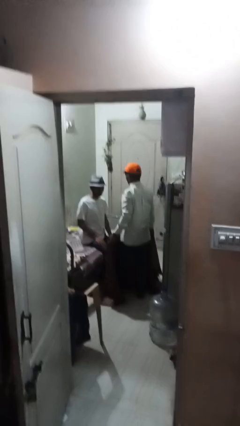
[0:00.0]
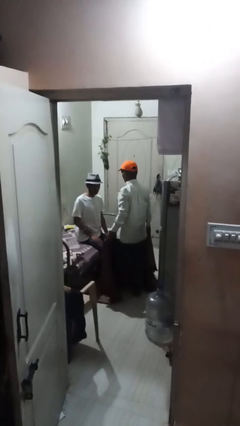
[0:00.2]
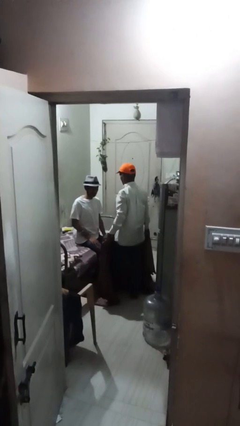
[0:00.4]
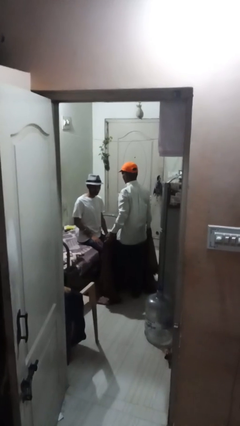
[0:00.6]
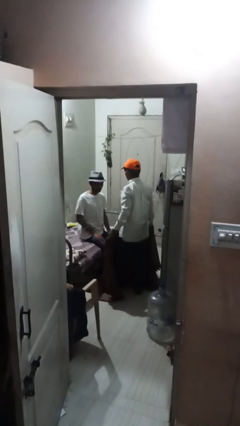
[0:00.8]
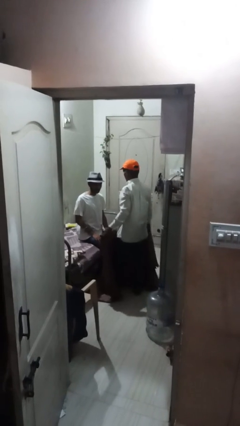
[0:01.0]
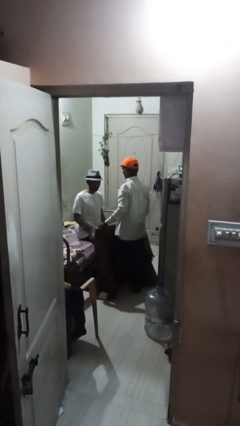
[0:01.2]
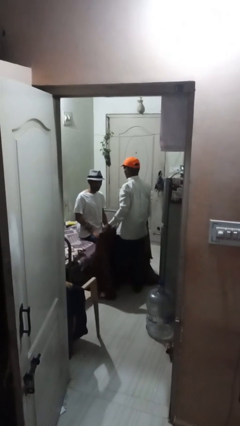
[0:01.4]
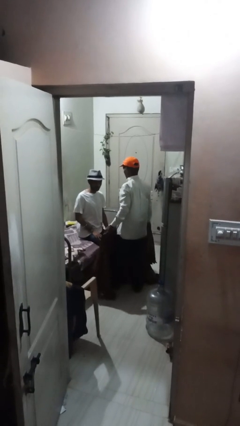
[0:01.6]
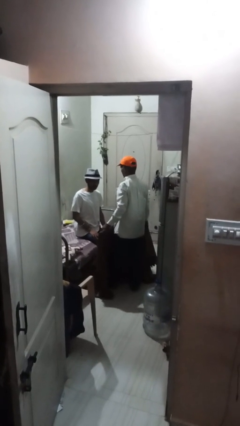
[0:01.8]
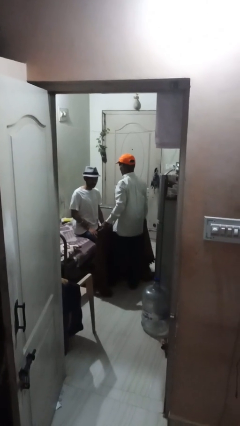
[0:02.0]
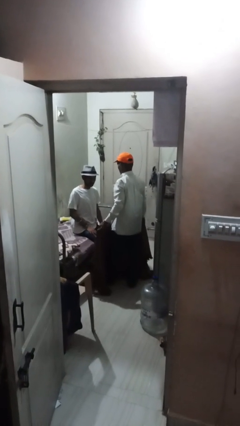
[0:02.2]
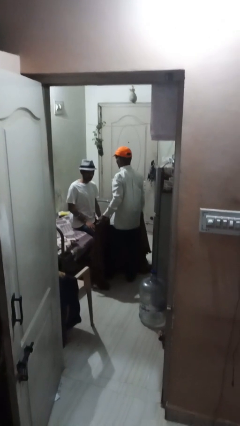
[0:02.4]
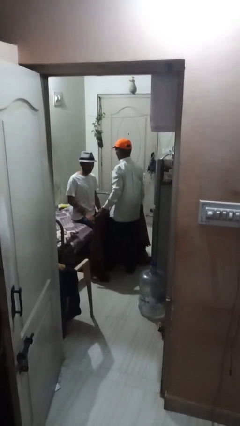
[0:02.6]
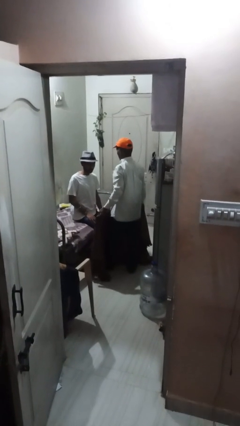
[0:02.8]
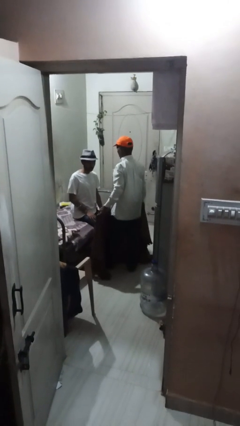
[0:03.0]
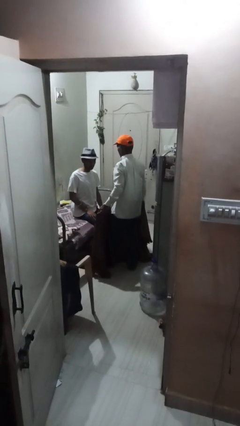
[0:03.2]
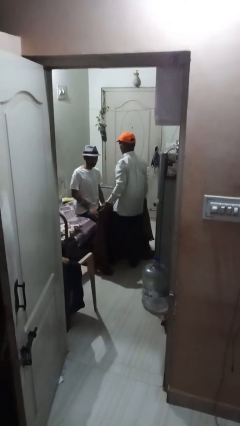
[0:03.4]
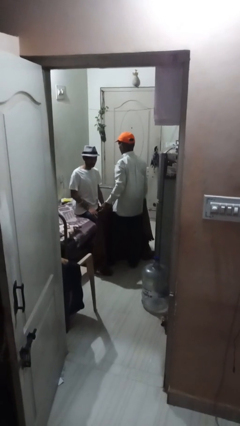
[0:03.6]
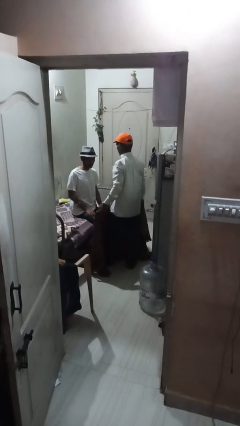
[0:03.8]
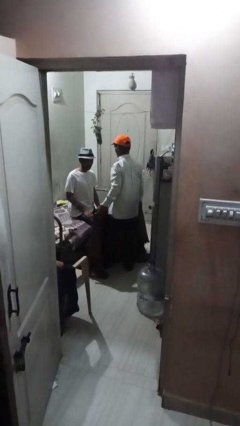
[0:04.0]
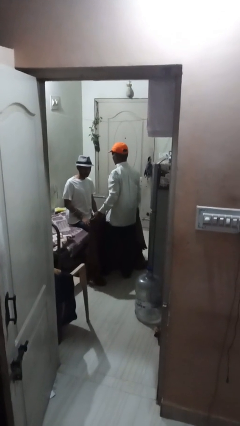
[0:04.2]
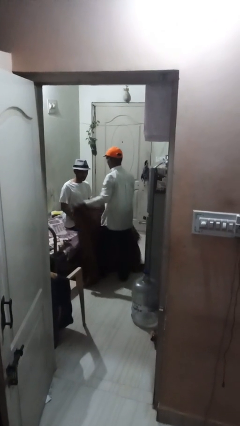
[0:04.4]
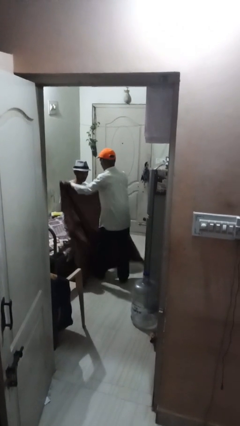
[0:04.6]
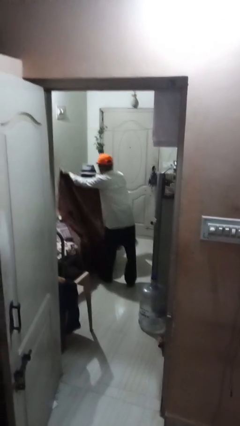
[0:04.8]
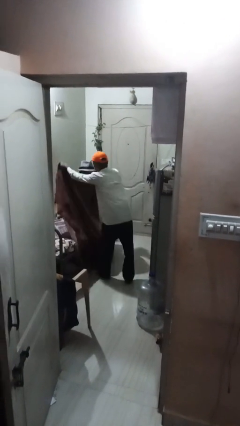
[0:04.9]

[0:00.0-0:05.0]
person uncovers friend with blanket

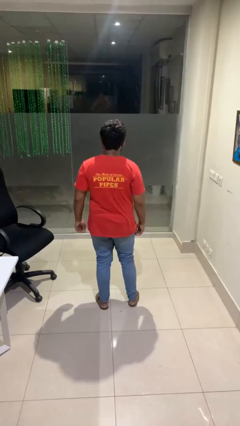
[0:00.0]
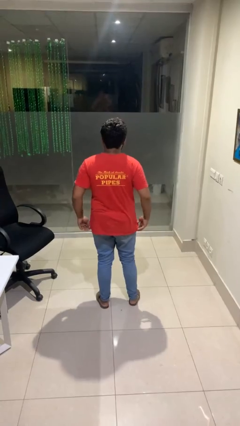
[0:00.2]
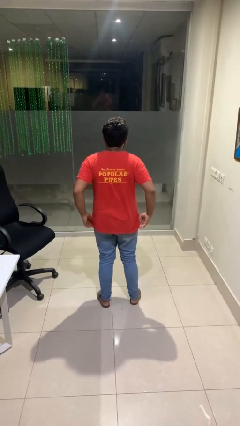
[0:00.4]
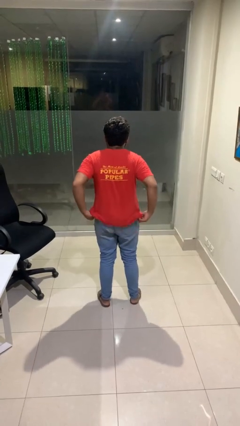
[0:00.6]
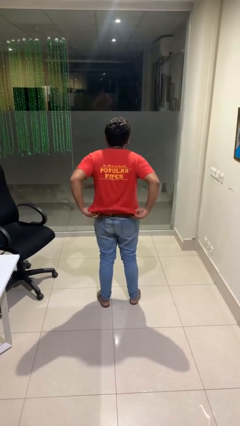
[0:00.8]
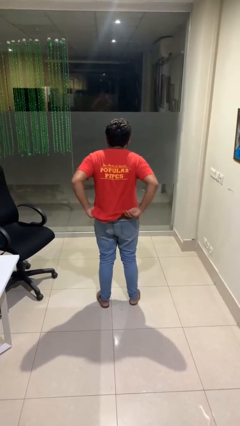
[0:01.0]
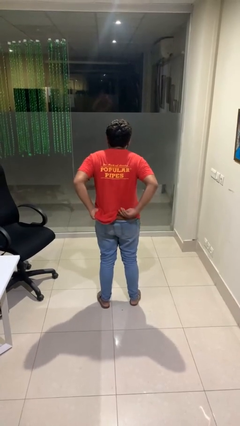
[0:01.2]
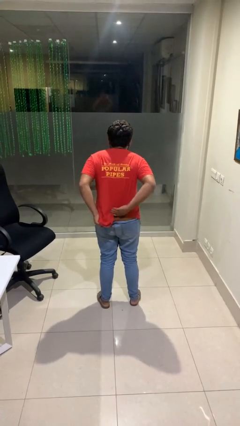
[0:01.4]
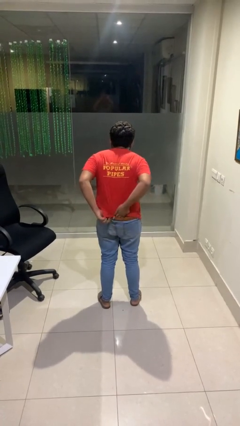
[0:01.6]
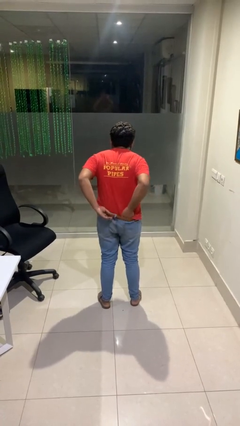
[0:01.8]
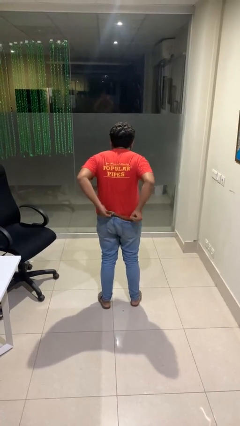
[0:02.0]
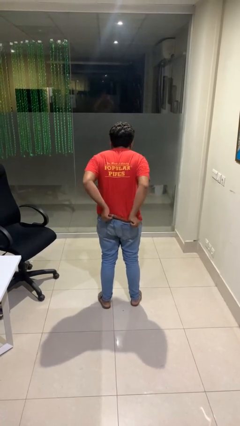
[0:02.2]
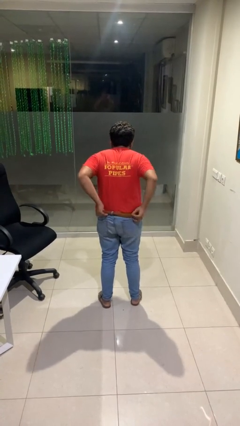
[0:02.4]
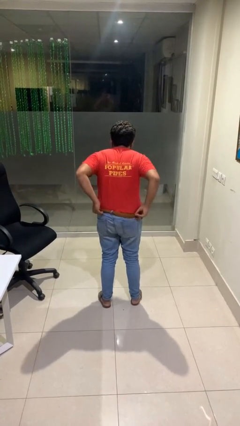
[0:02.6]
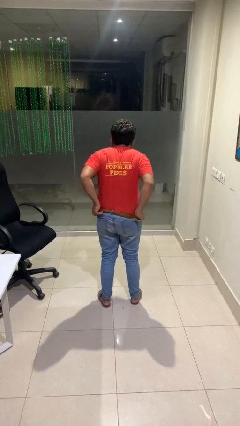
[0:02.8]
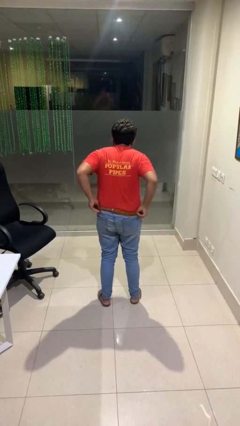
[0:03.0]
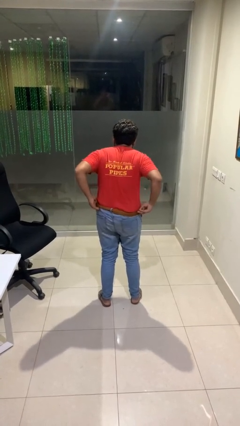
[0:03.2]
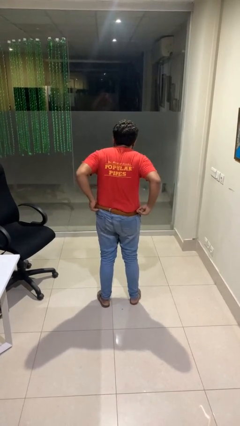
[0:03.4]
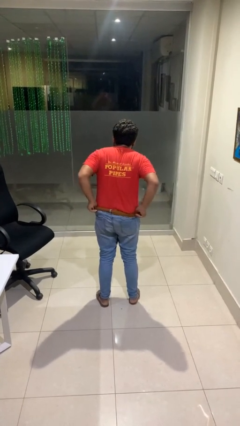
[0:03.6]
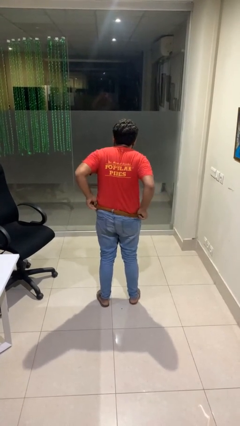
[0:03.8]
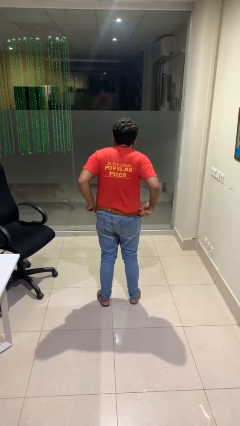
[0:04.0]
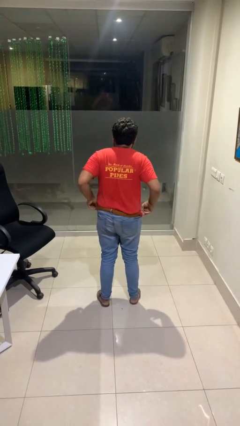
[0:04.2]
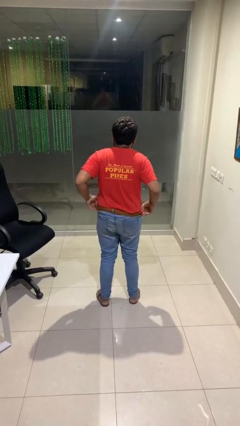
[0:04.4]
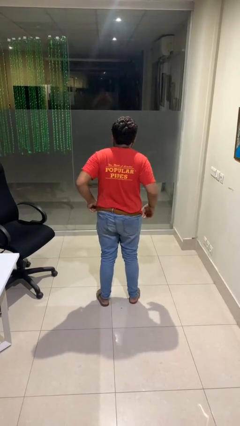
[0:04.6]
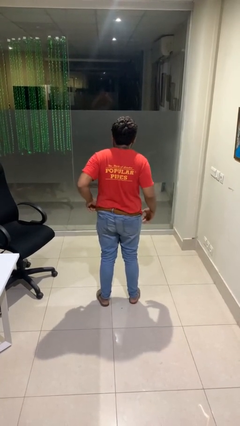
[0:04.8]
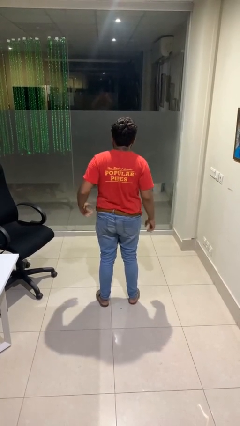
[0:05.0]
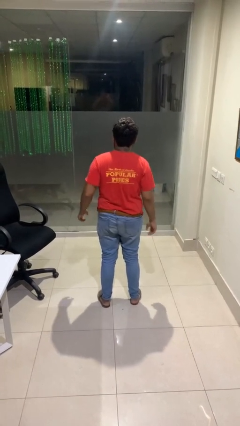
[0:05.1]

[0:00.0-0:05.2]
person tucks in shirt

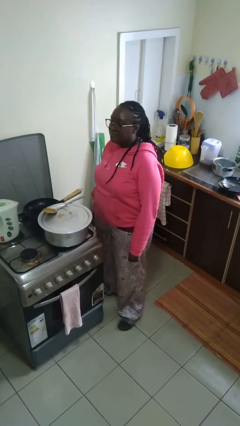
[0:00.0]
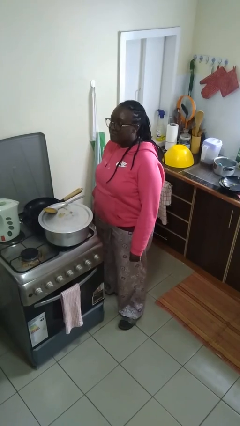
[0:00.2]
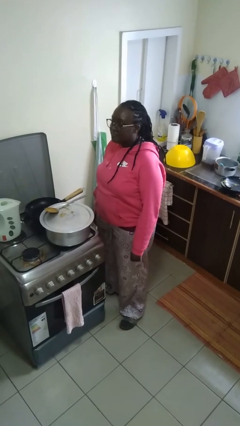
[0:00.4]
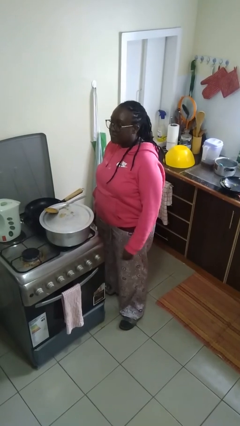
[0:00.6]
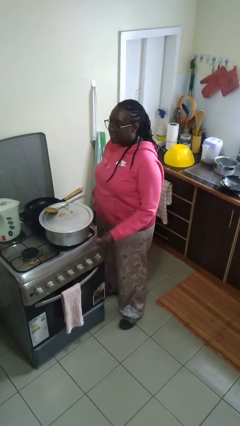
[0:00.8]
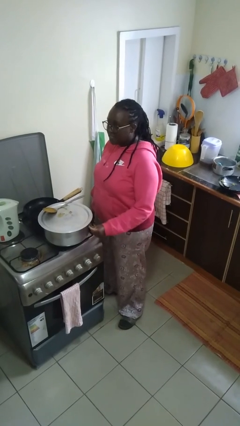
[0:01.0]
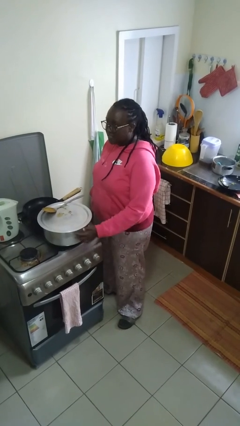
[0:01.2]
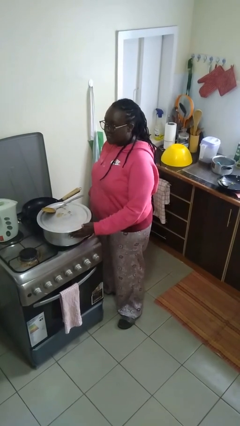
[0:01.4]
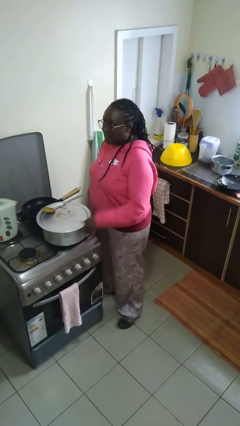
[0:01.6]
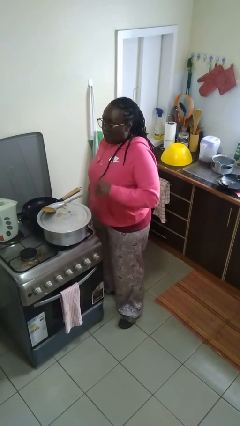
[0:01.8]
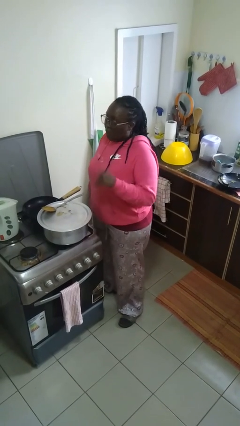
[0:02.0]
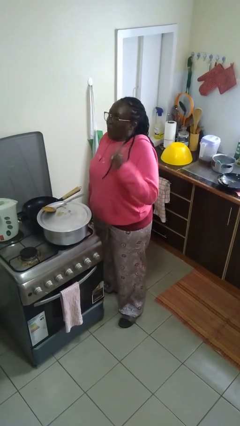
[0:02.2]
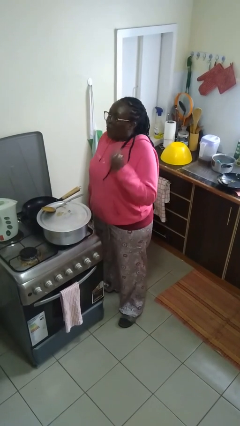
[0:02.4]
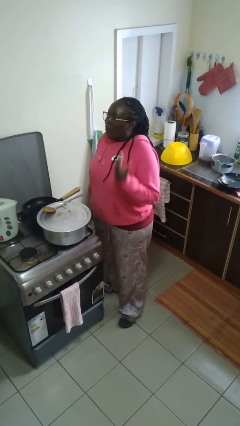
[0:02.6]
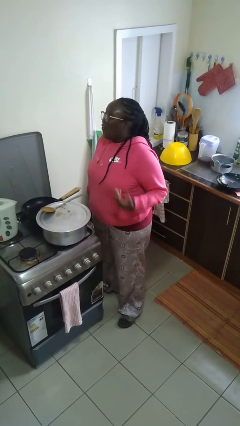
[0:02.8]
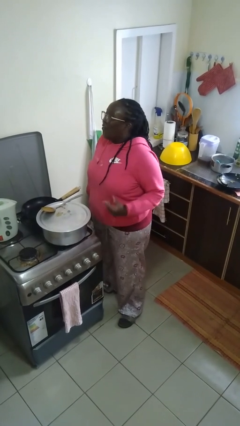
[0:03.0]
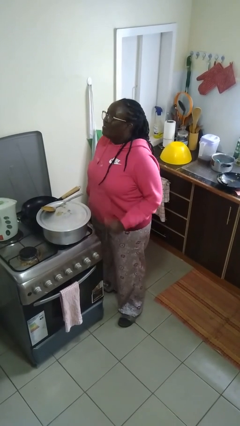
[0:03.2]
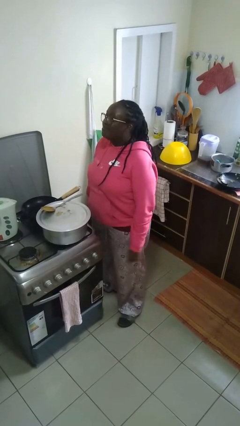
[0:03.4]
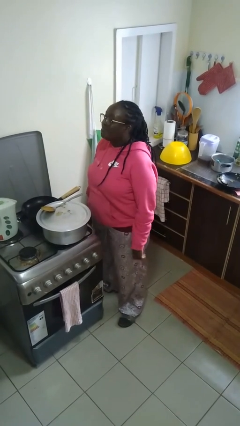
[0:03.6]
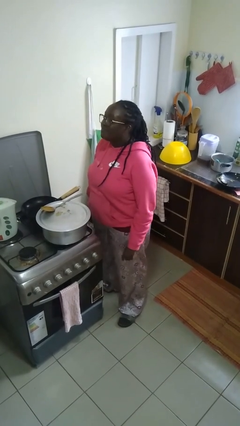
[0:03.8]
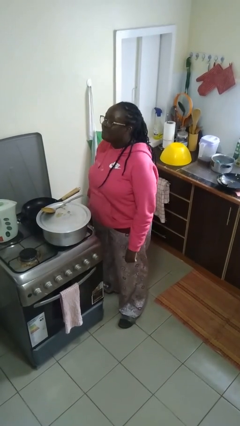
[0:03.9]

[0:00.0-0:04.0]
person burns hand

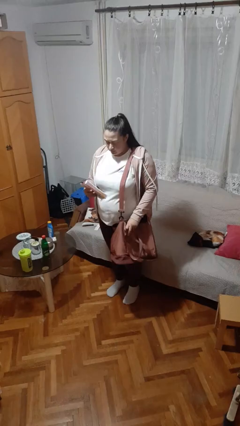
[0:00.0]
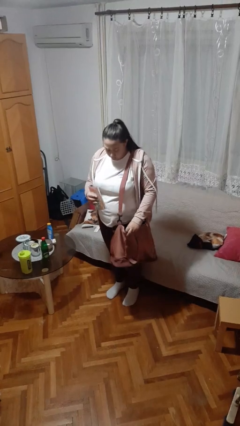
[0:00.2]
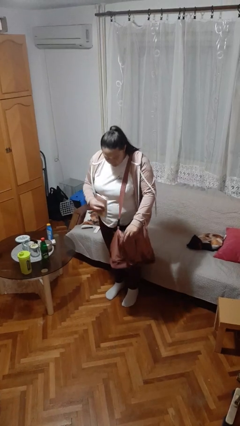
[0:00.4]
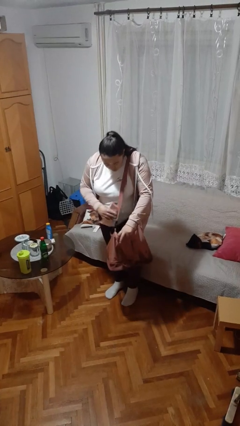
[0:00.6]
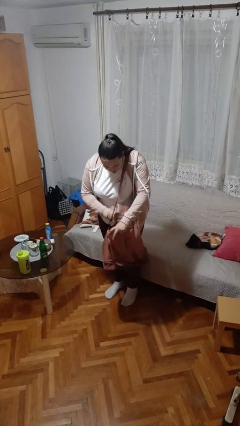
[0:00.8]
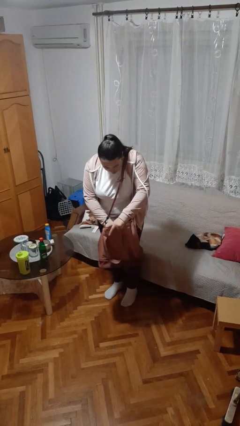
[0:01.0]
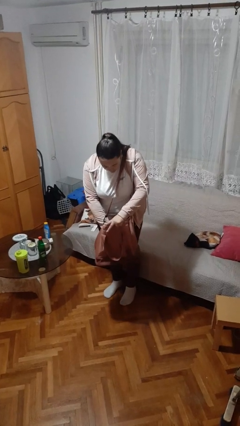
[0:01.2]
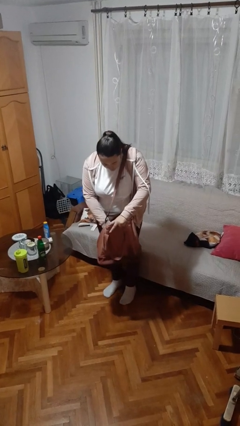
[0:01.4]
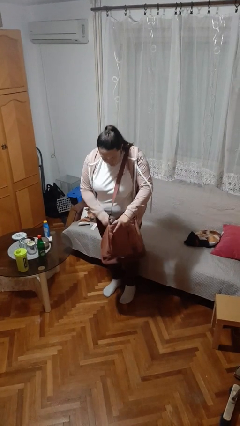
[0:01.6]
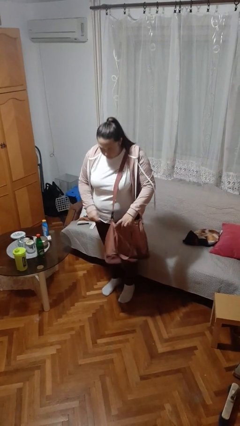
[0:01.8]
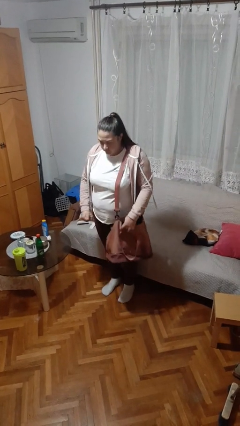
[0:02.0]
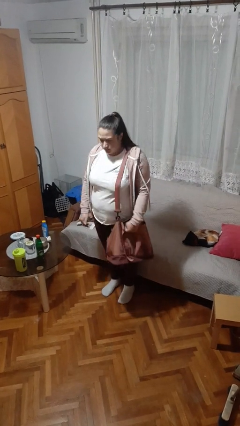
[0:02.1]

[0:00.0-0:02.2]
person puts object into purse

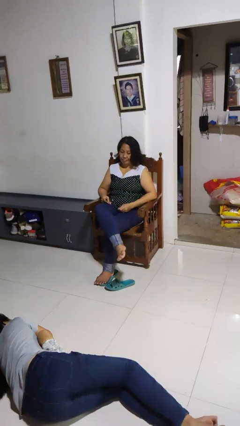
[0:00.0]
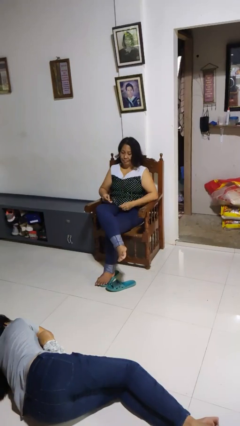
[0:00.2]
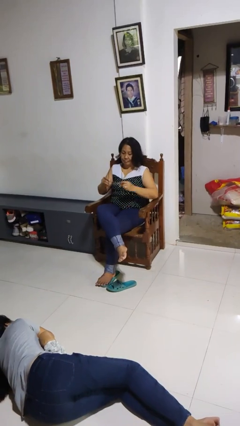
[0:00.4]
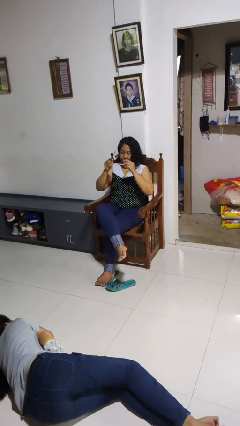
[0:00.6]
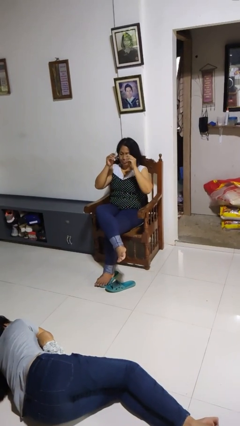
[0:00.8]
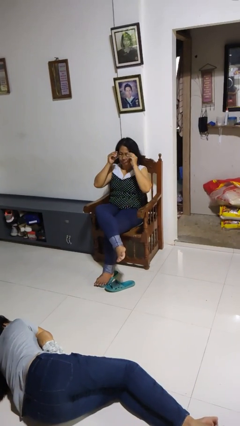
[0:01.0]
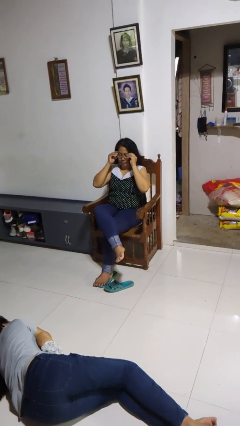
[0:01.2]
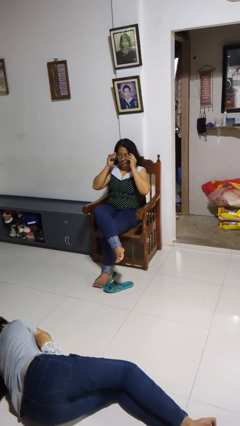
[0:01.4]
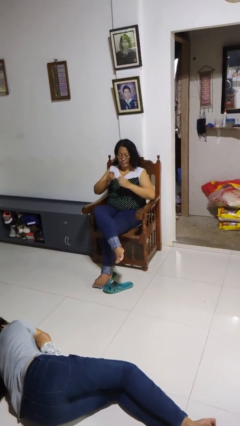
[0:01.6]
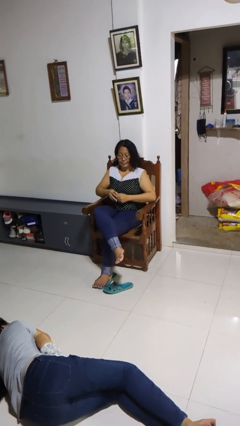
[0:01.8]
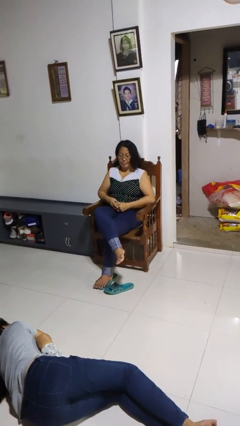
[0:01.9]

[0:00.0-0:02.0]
person puts on glasses
